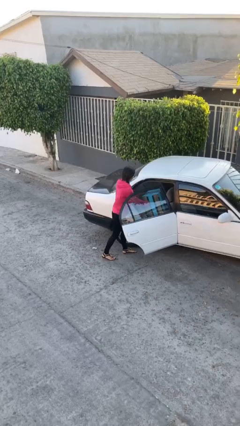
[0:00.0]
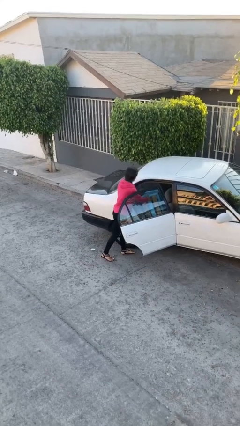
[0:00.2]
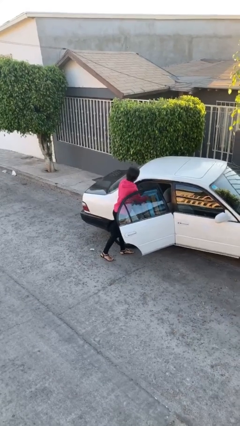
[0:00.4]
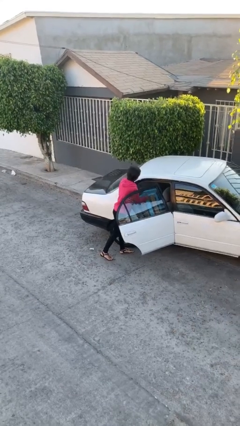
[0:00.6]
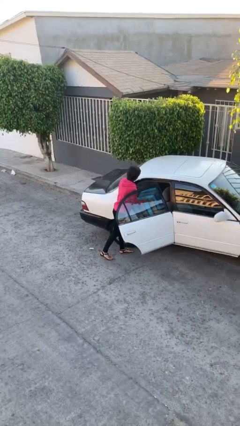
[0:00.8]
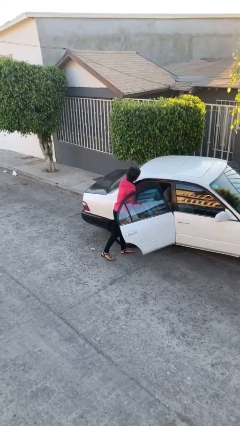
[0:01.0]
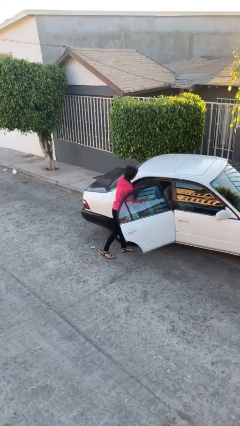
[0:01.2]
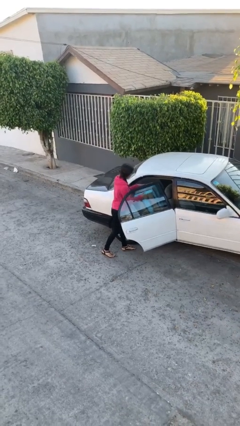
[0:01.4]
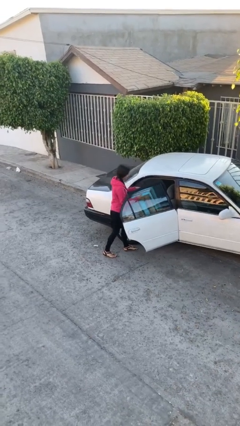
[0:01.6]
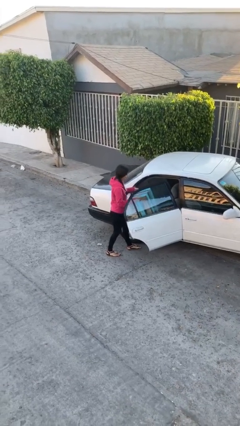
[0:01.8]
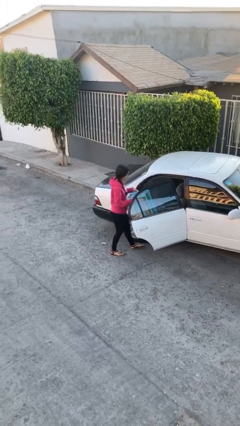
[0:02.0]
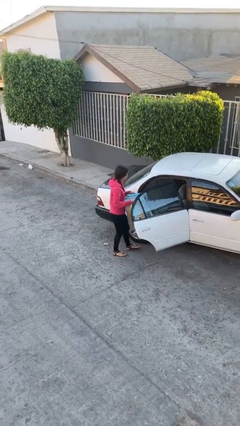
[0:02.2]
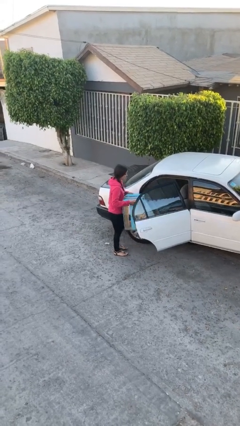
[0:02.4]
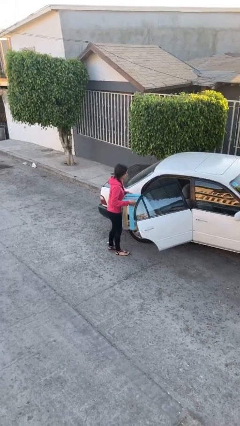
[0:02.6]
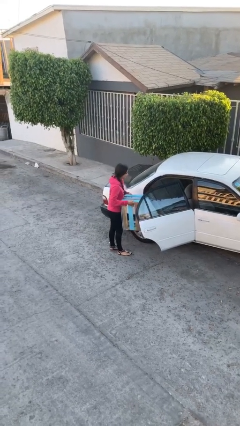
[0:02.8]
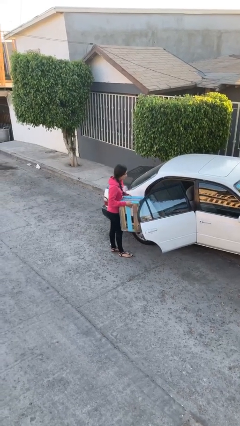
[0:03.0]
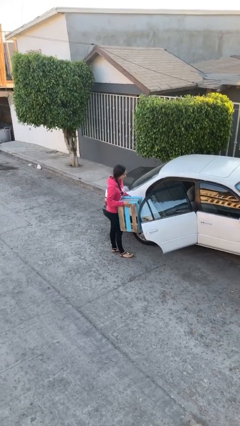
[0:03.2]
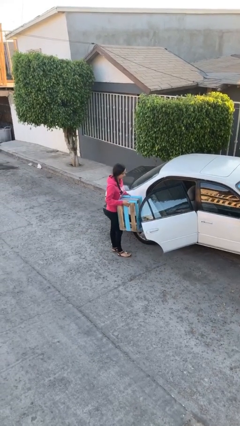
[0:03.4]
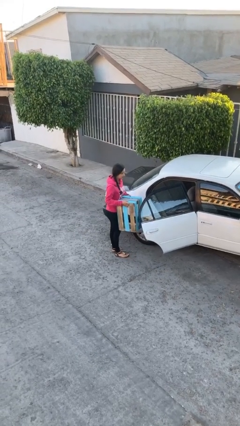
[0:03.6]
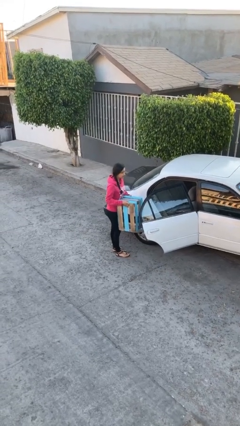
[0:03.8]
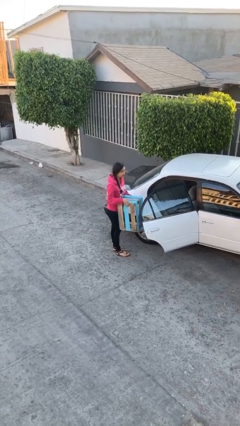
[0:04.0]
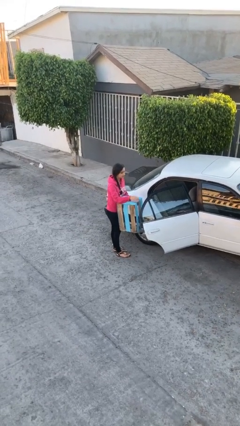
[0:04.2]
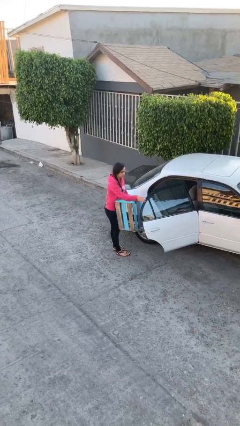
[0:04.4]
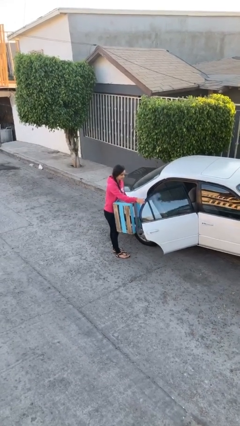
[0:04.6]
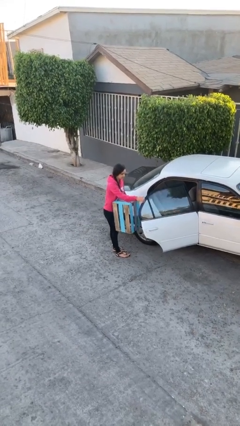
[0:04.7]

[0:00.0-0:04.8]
person unloads car

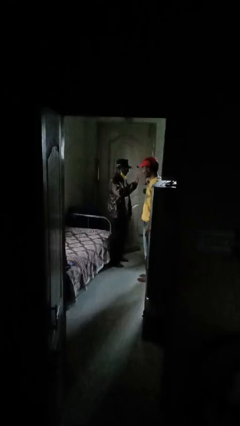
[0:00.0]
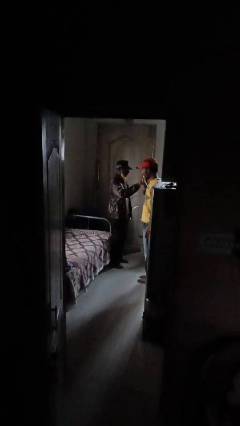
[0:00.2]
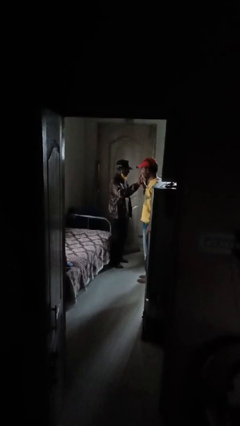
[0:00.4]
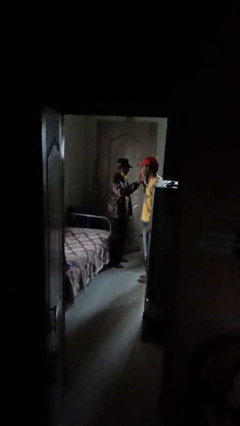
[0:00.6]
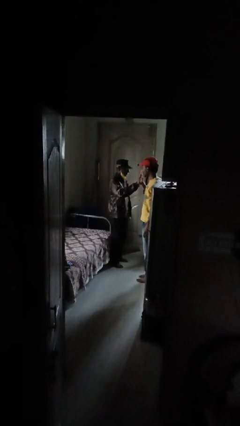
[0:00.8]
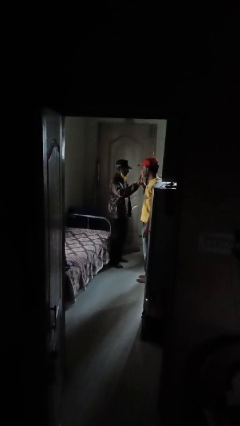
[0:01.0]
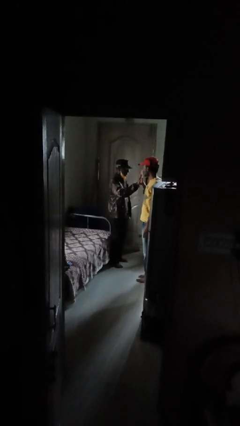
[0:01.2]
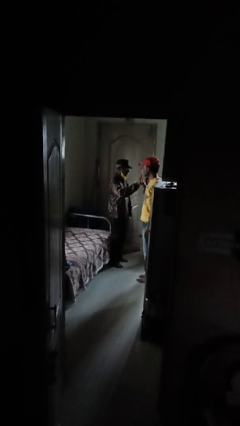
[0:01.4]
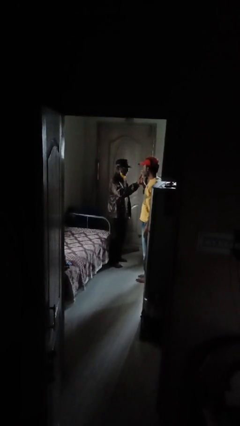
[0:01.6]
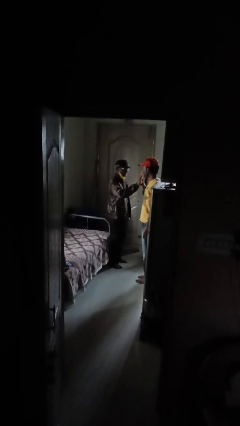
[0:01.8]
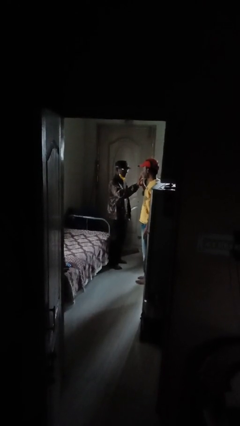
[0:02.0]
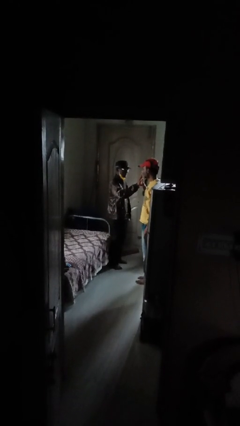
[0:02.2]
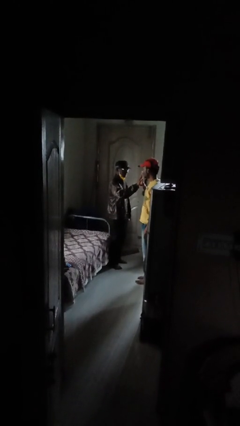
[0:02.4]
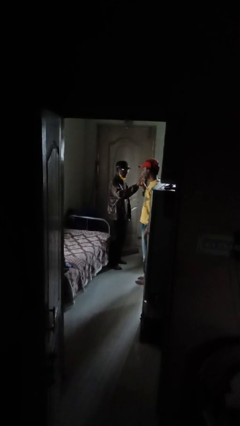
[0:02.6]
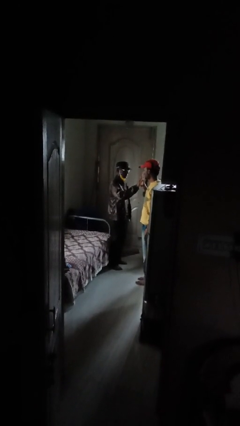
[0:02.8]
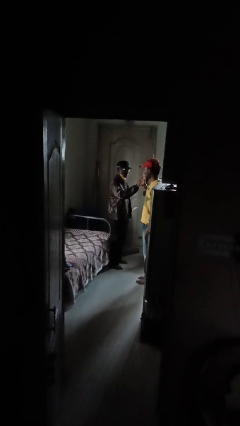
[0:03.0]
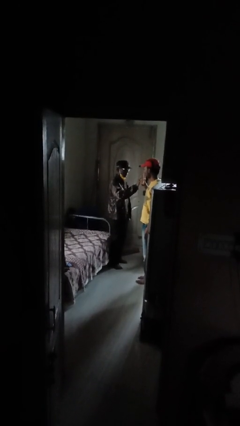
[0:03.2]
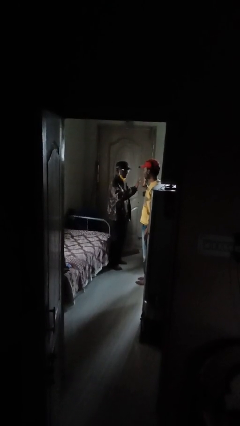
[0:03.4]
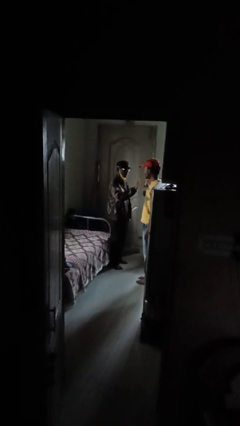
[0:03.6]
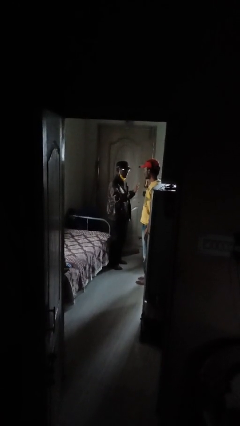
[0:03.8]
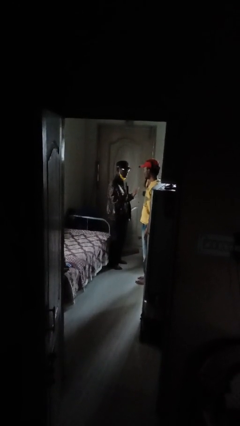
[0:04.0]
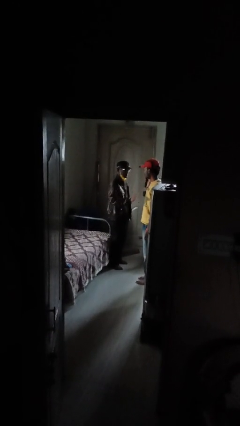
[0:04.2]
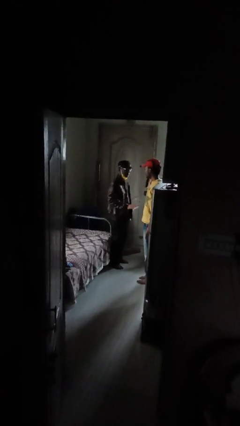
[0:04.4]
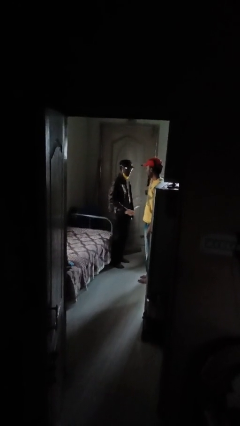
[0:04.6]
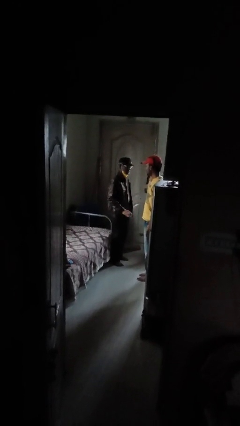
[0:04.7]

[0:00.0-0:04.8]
person highfives hand

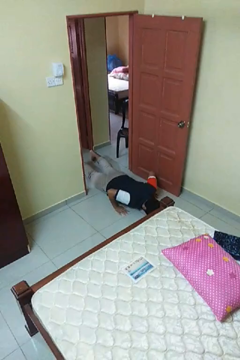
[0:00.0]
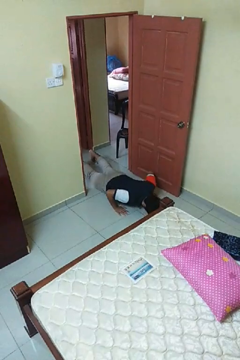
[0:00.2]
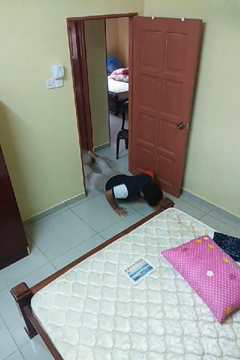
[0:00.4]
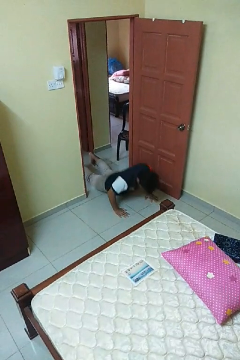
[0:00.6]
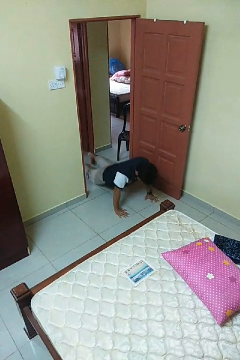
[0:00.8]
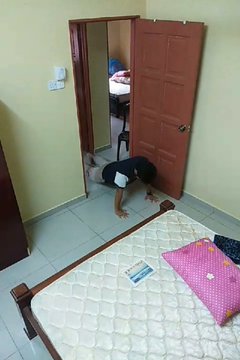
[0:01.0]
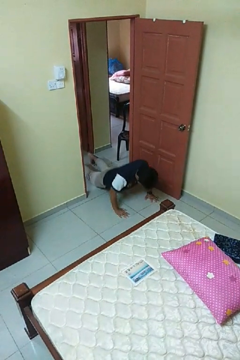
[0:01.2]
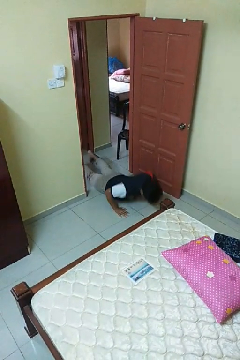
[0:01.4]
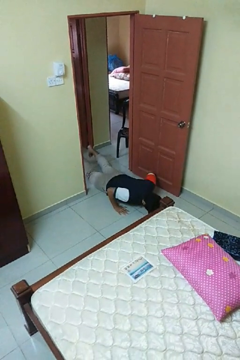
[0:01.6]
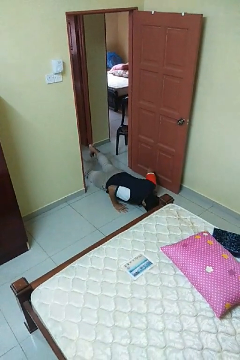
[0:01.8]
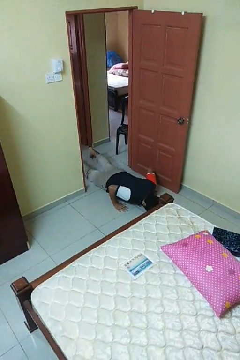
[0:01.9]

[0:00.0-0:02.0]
person exercises with pushup

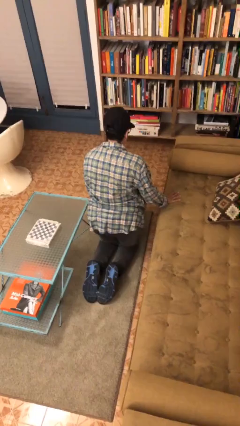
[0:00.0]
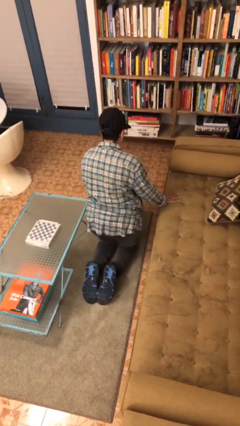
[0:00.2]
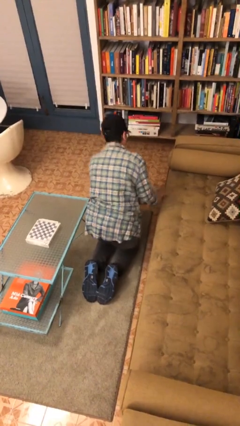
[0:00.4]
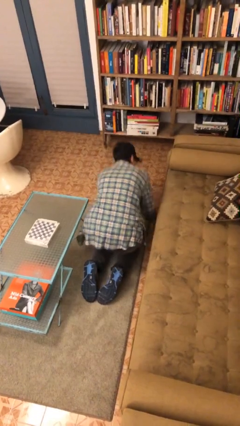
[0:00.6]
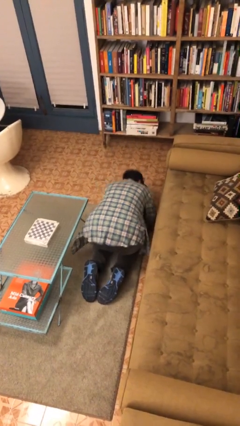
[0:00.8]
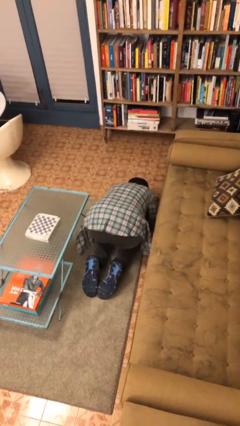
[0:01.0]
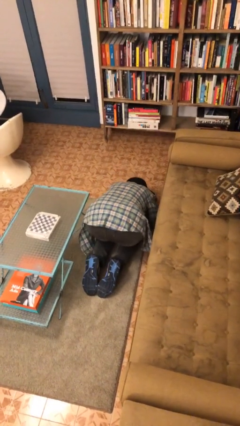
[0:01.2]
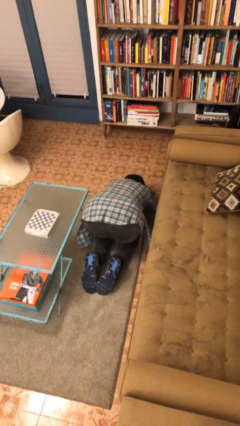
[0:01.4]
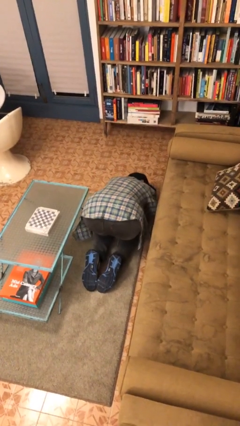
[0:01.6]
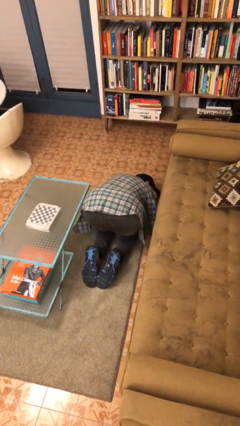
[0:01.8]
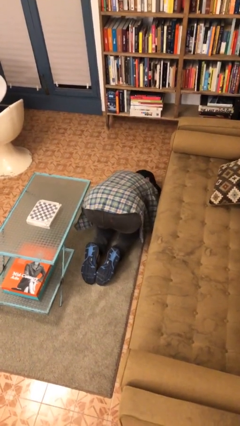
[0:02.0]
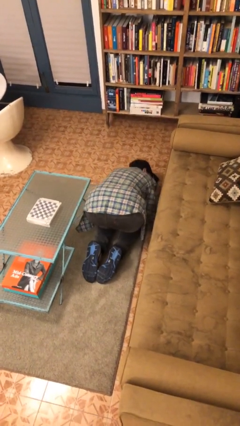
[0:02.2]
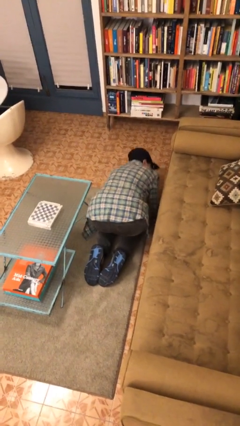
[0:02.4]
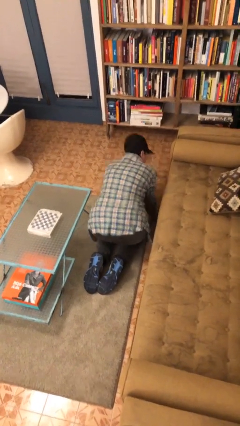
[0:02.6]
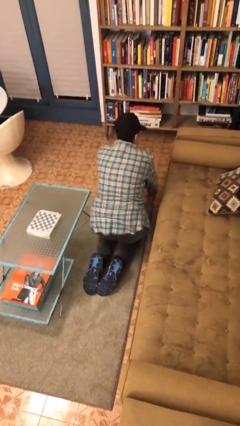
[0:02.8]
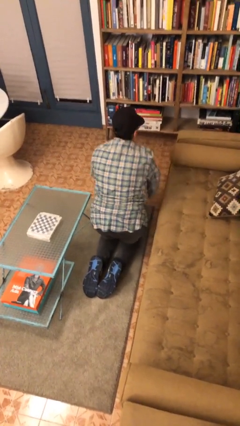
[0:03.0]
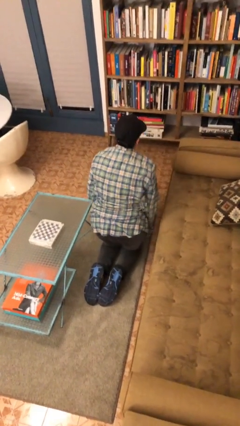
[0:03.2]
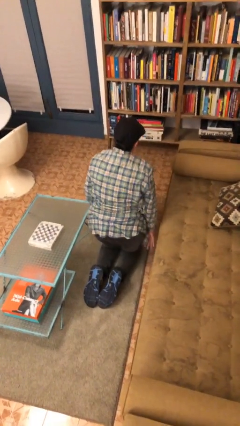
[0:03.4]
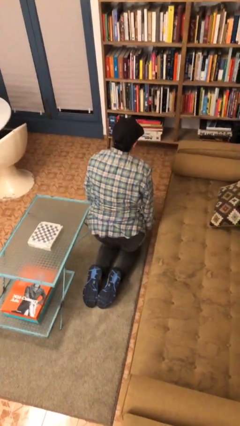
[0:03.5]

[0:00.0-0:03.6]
person searches under couch

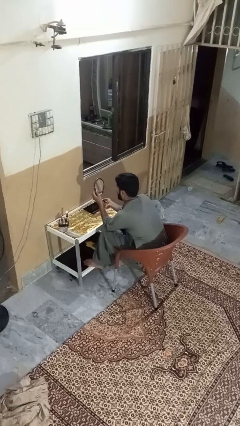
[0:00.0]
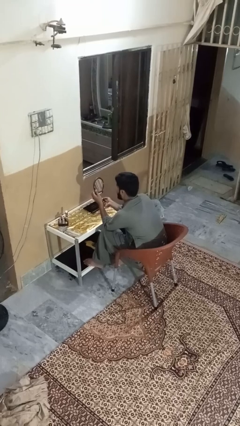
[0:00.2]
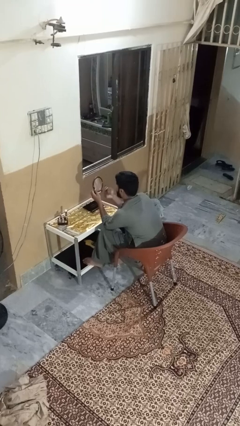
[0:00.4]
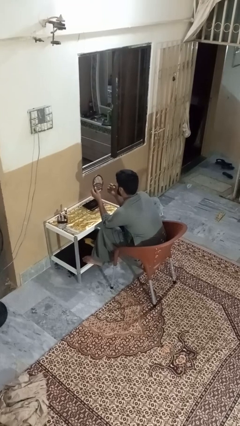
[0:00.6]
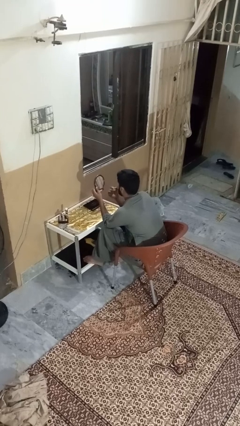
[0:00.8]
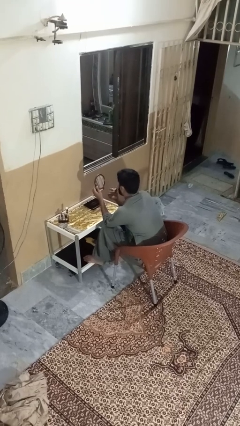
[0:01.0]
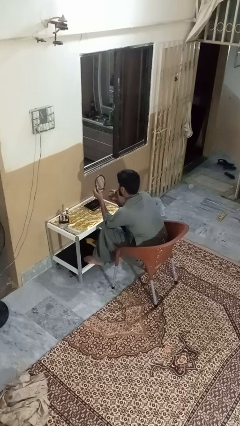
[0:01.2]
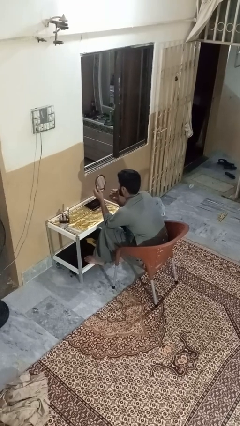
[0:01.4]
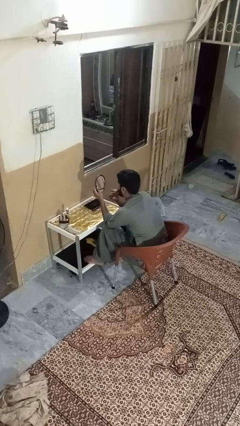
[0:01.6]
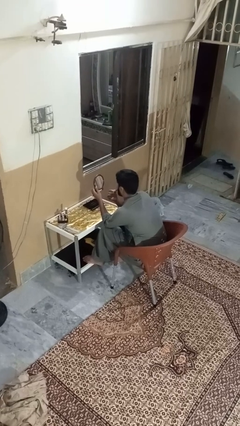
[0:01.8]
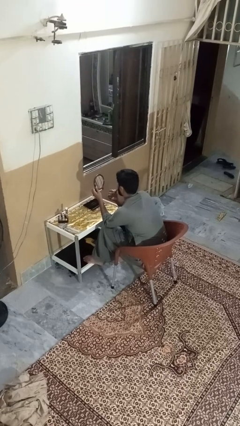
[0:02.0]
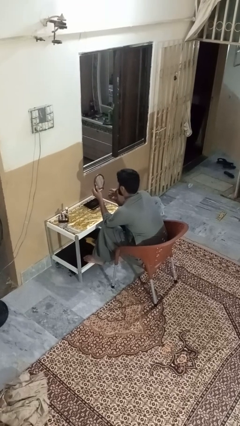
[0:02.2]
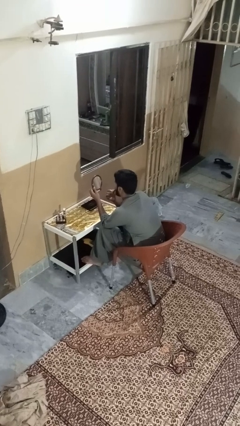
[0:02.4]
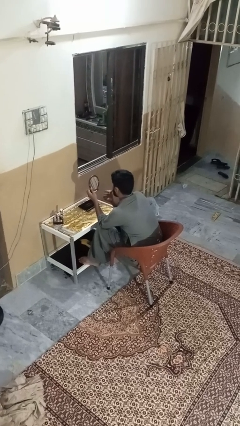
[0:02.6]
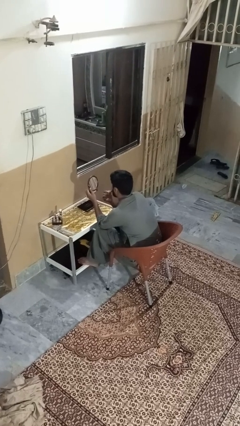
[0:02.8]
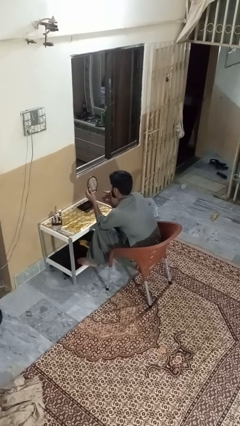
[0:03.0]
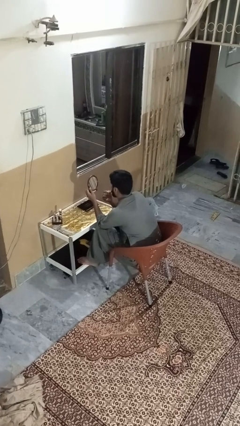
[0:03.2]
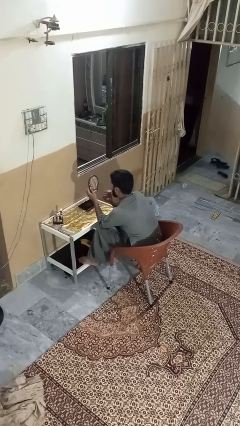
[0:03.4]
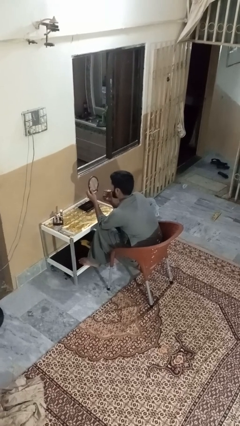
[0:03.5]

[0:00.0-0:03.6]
person applies lip makeup
